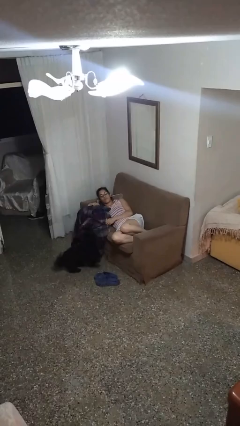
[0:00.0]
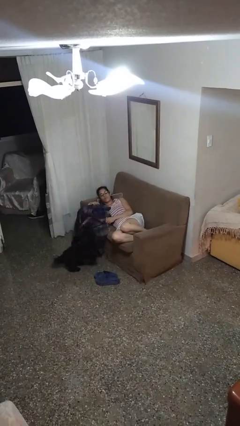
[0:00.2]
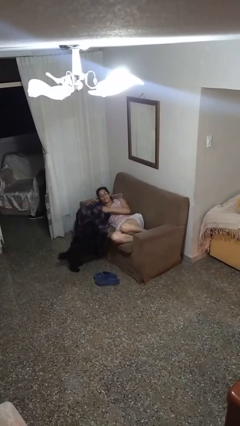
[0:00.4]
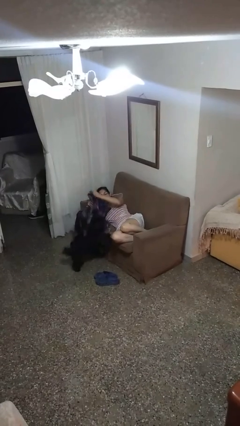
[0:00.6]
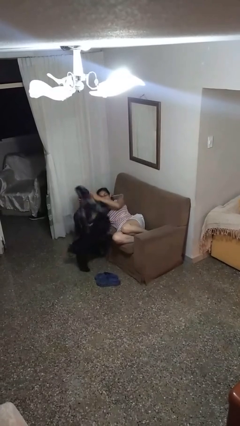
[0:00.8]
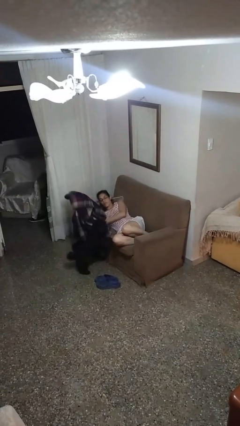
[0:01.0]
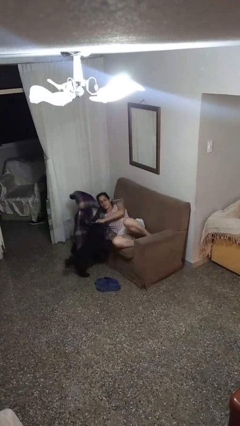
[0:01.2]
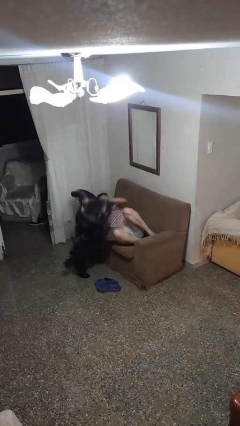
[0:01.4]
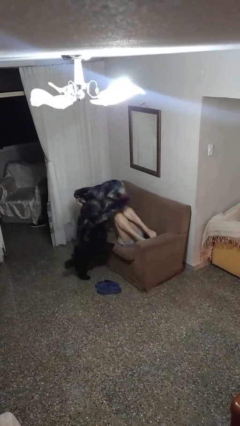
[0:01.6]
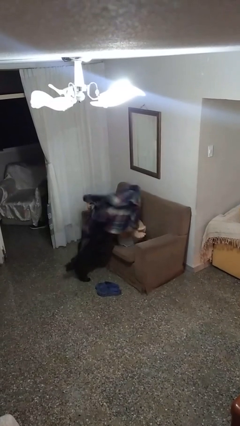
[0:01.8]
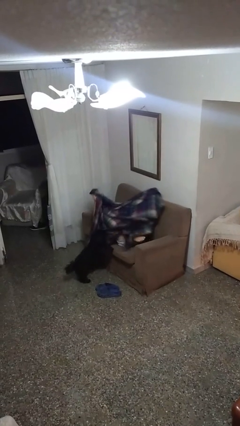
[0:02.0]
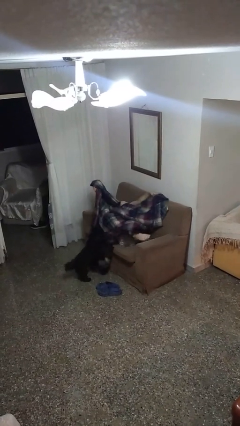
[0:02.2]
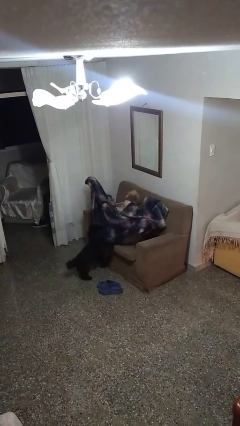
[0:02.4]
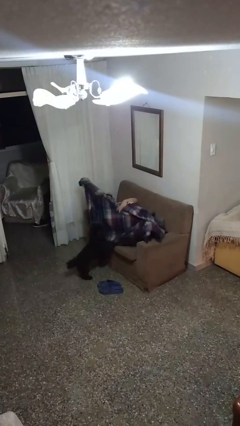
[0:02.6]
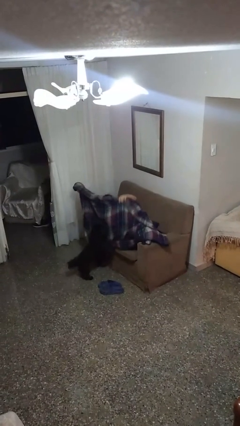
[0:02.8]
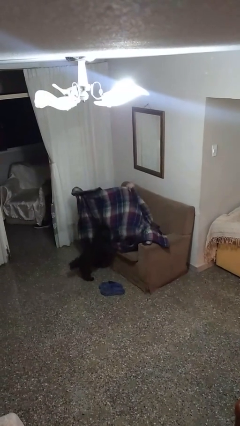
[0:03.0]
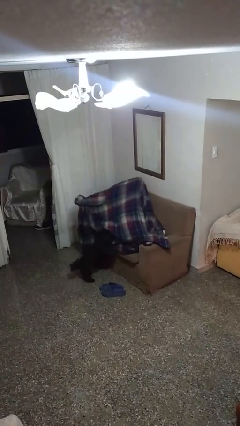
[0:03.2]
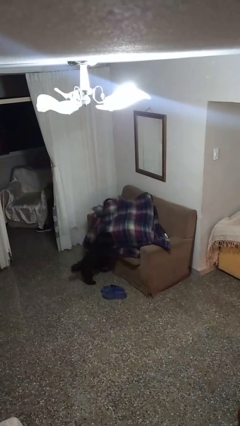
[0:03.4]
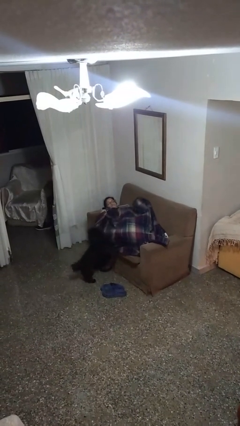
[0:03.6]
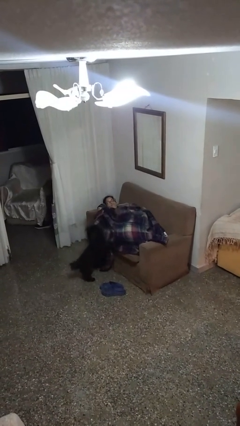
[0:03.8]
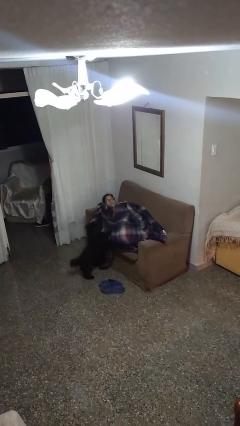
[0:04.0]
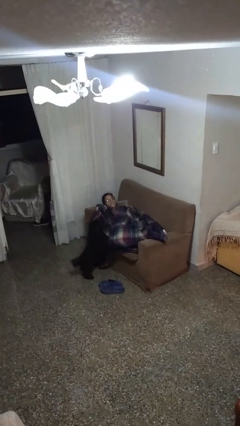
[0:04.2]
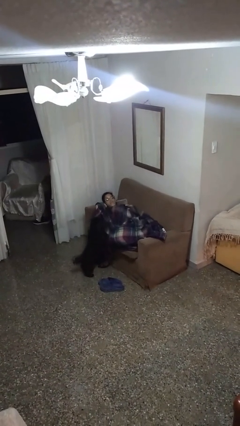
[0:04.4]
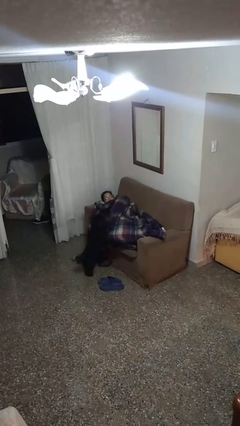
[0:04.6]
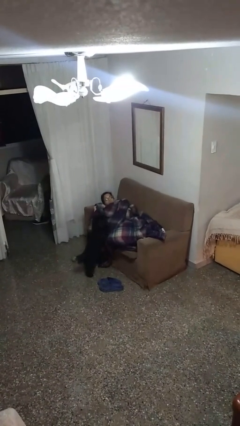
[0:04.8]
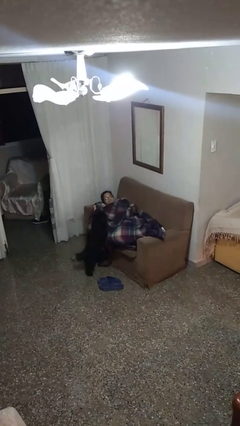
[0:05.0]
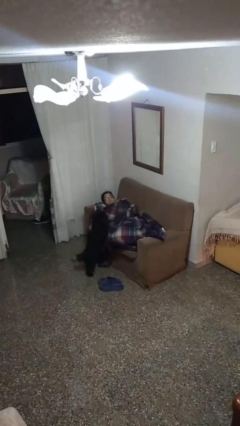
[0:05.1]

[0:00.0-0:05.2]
person covers with blanket

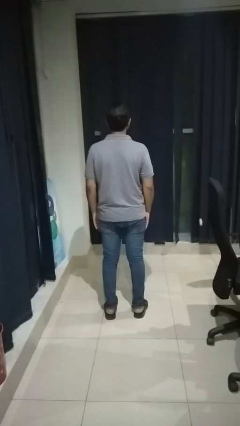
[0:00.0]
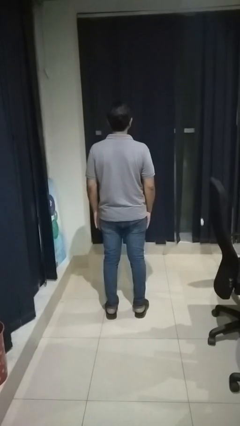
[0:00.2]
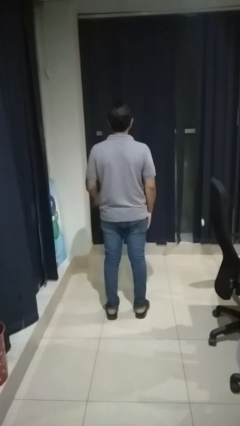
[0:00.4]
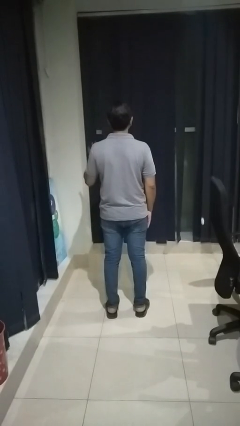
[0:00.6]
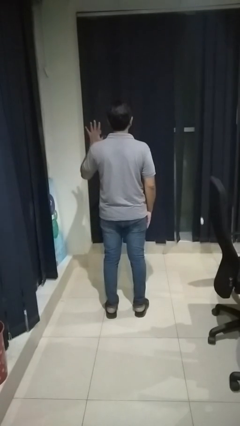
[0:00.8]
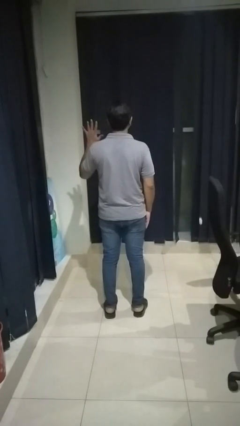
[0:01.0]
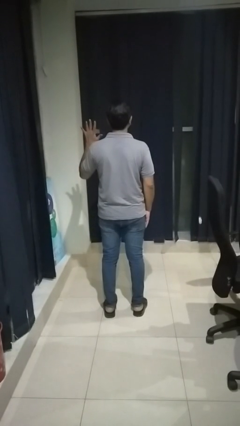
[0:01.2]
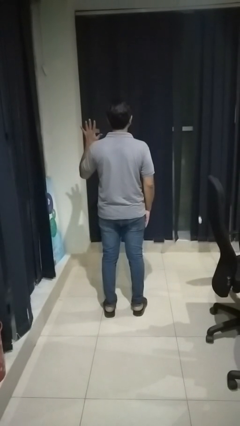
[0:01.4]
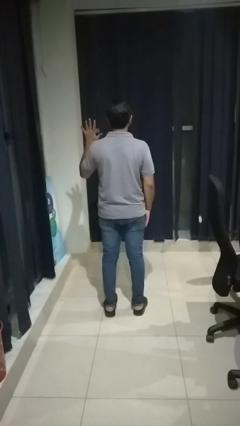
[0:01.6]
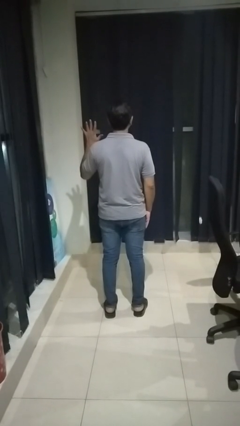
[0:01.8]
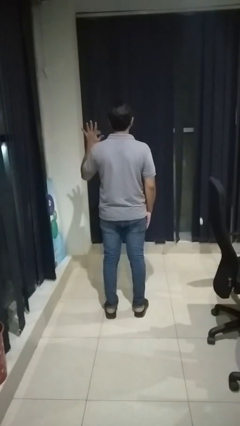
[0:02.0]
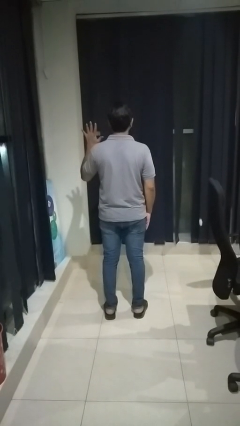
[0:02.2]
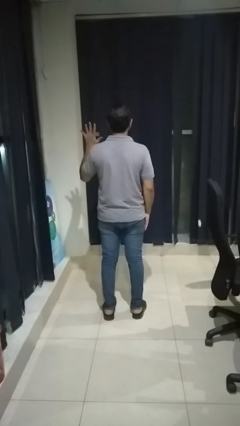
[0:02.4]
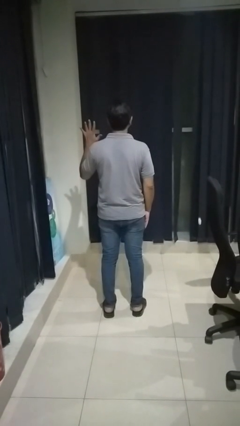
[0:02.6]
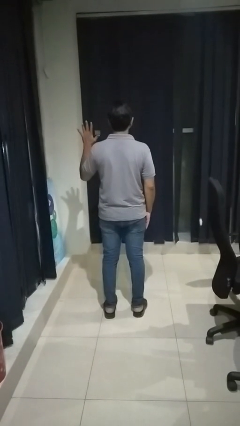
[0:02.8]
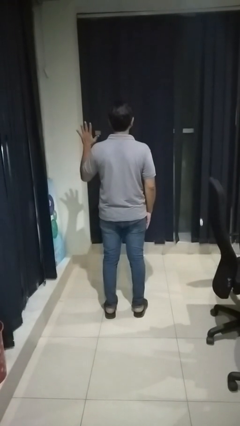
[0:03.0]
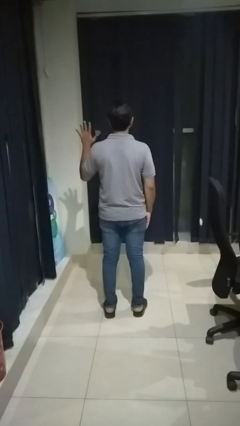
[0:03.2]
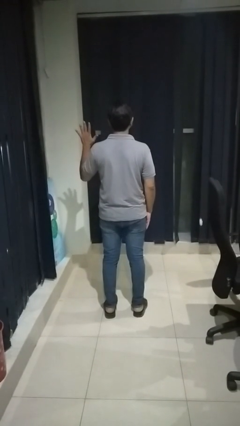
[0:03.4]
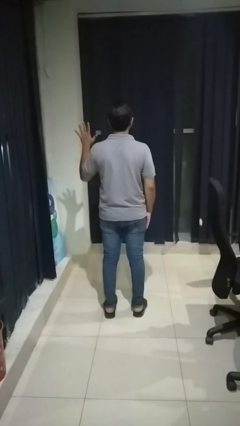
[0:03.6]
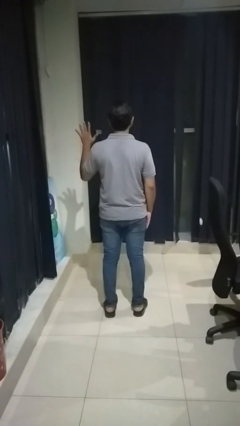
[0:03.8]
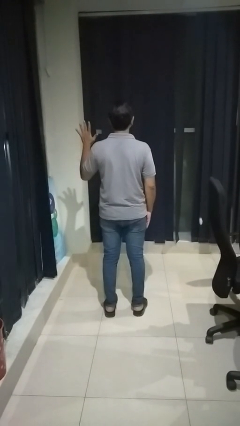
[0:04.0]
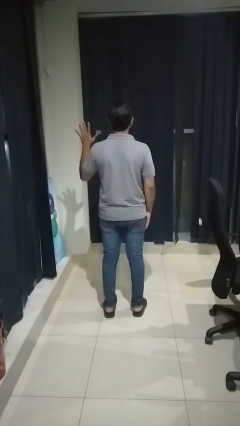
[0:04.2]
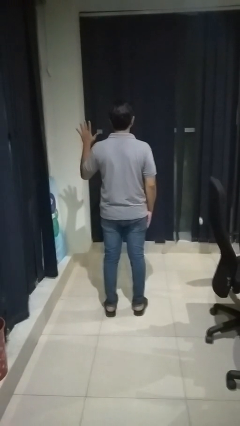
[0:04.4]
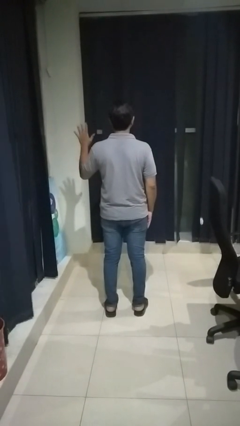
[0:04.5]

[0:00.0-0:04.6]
person gestures number five

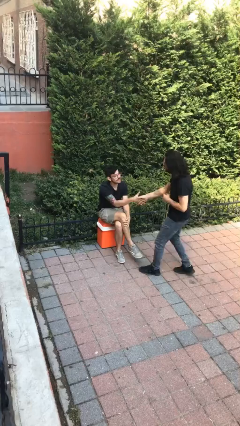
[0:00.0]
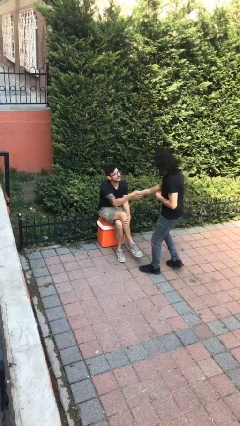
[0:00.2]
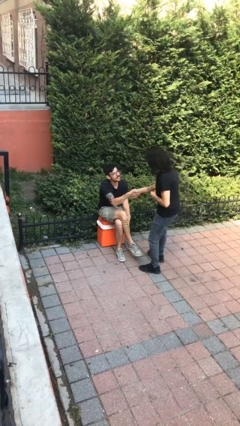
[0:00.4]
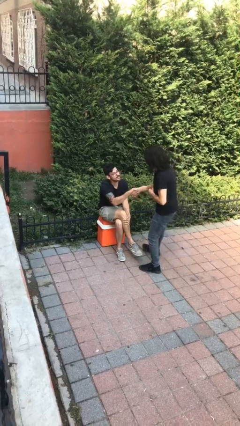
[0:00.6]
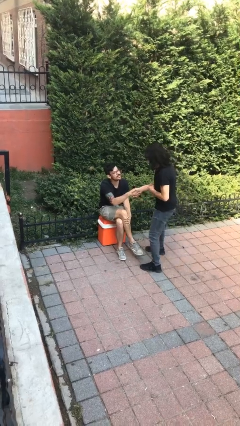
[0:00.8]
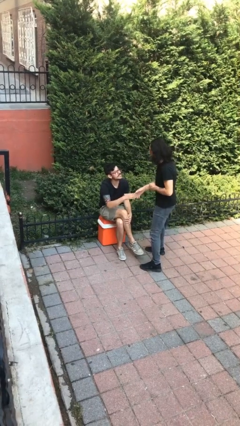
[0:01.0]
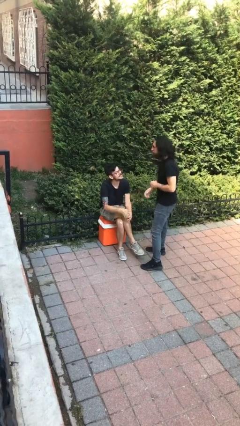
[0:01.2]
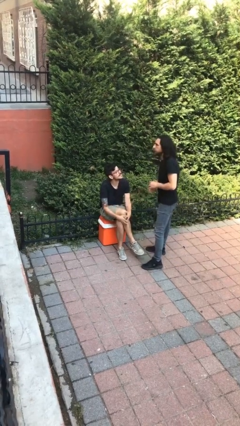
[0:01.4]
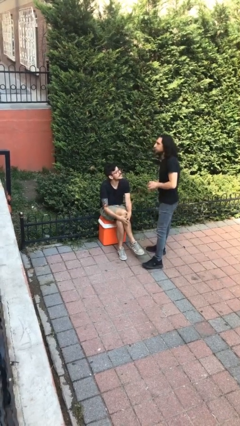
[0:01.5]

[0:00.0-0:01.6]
person shakes hand

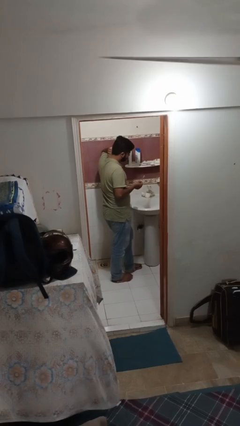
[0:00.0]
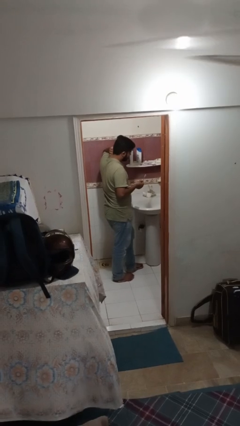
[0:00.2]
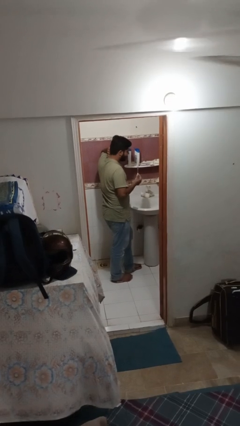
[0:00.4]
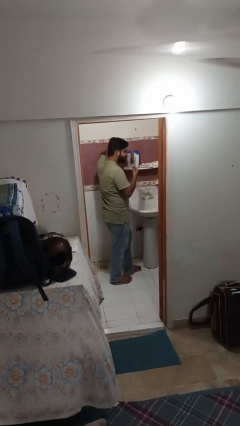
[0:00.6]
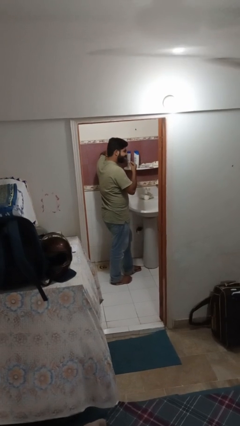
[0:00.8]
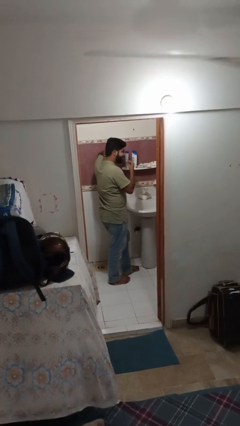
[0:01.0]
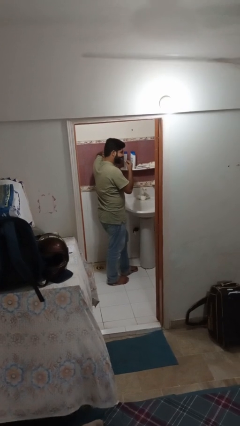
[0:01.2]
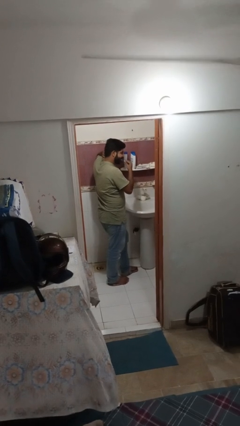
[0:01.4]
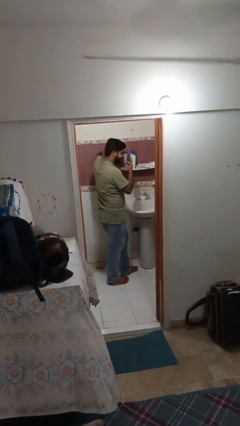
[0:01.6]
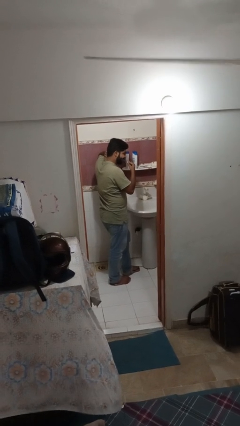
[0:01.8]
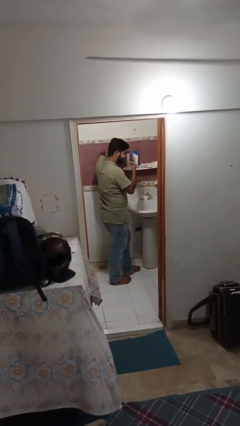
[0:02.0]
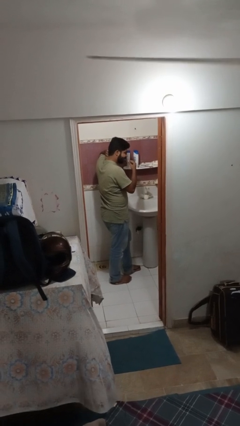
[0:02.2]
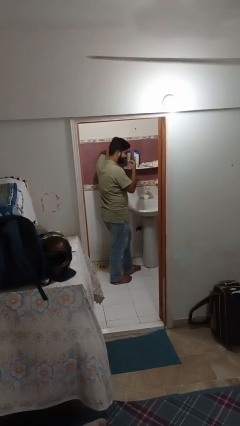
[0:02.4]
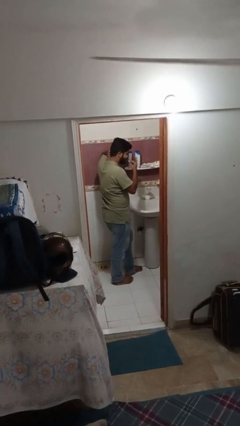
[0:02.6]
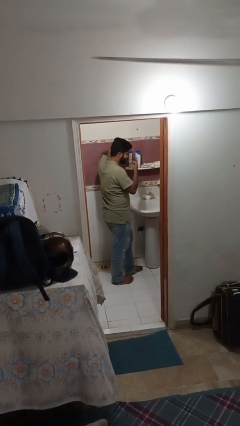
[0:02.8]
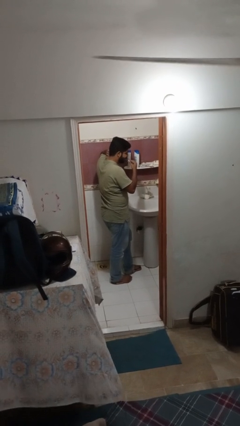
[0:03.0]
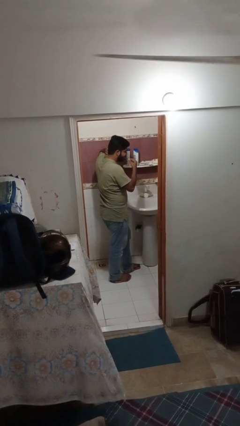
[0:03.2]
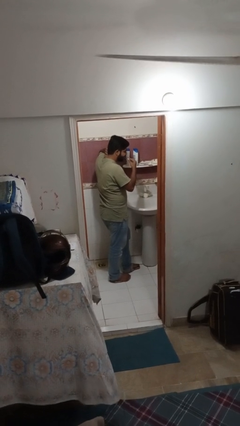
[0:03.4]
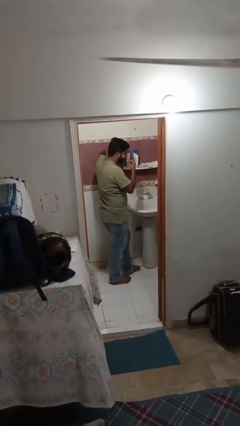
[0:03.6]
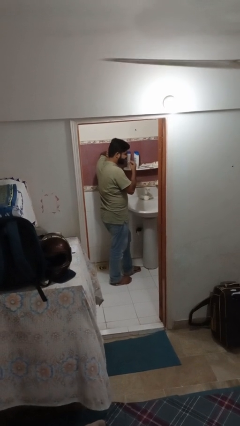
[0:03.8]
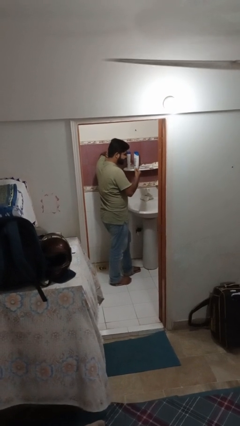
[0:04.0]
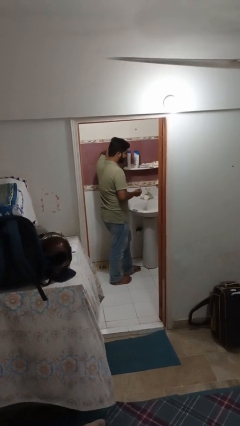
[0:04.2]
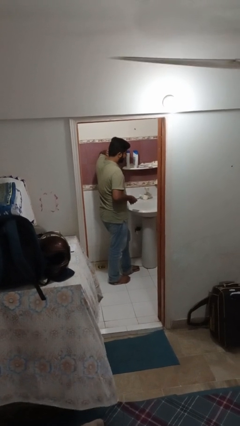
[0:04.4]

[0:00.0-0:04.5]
person brushes teeth

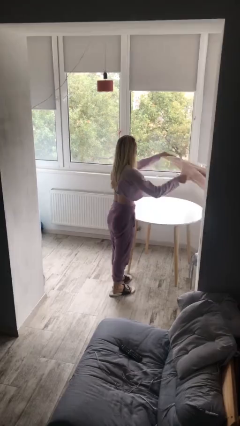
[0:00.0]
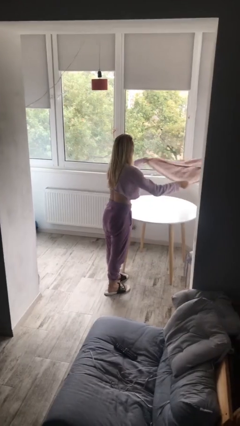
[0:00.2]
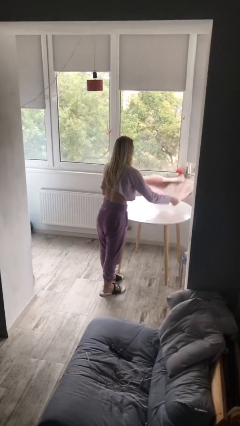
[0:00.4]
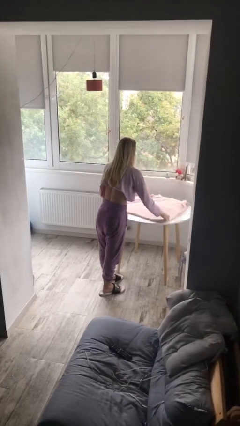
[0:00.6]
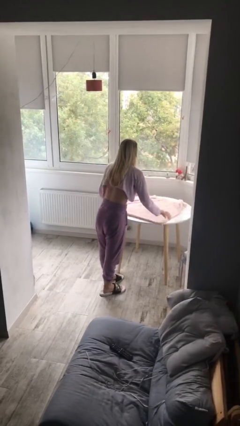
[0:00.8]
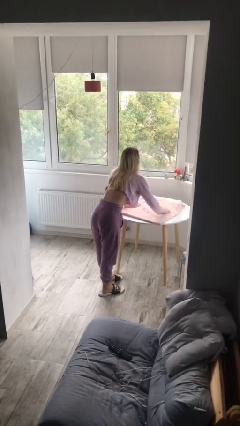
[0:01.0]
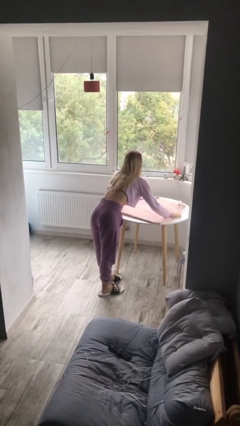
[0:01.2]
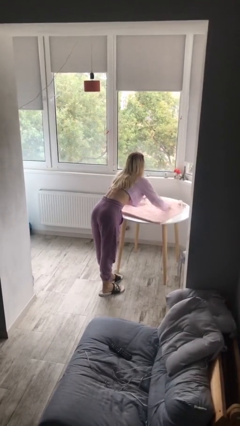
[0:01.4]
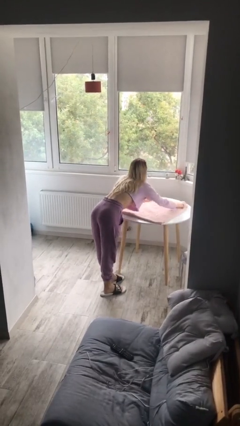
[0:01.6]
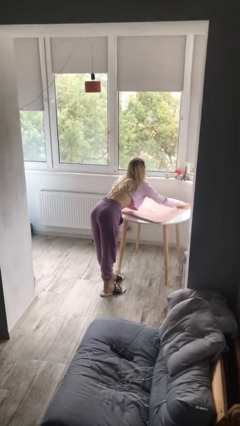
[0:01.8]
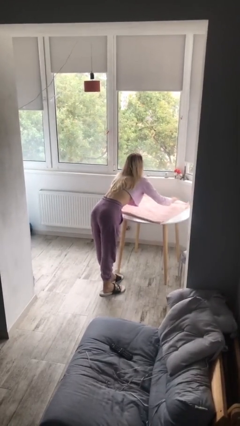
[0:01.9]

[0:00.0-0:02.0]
person spreads tablecloth
